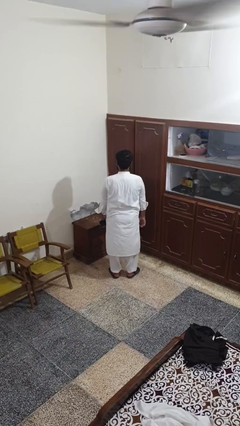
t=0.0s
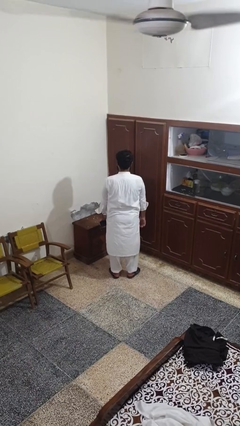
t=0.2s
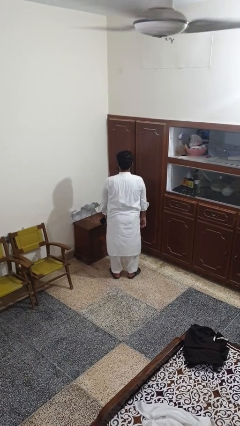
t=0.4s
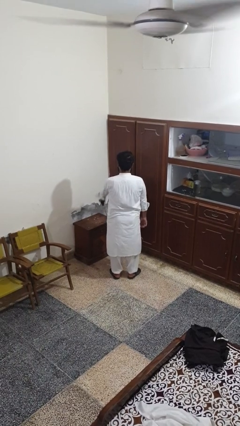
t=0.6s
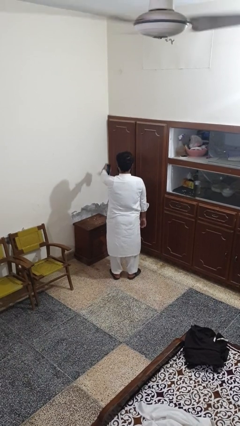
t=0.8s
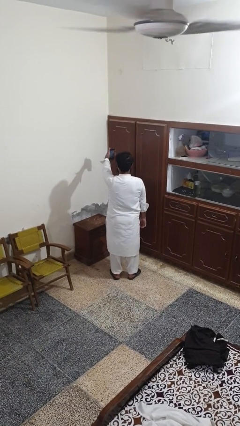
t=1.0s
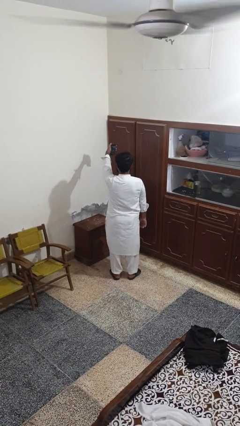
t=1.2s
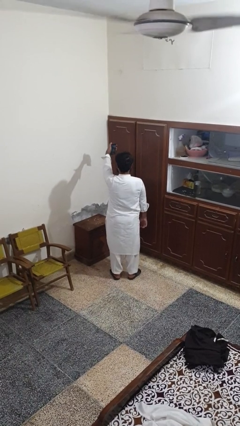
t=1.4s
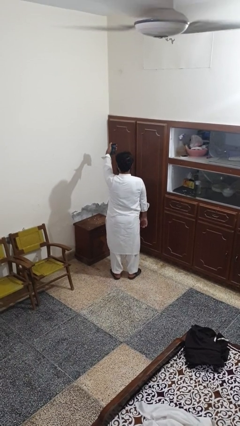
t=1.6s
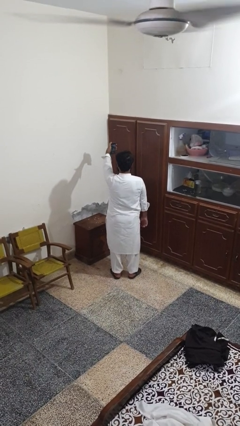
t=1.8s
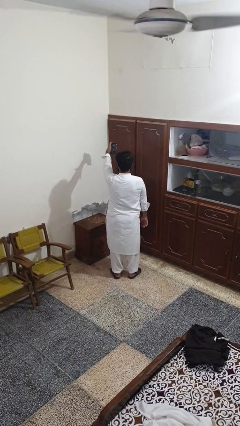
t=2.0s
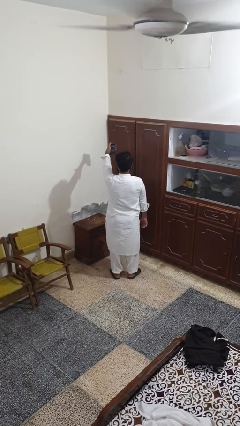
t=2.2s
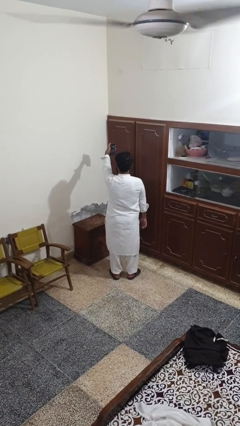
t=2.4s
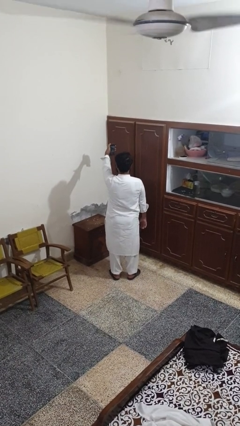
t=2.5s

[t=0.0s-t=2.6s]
person takes selfie

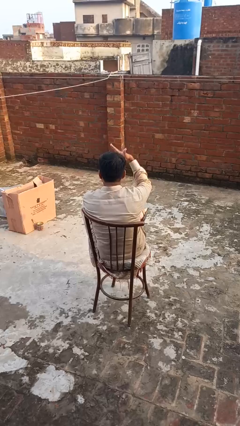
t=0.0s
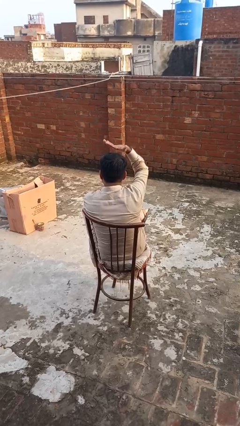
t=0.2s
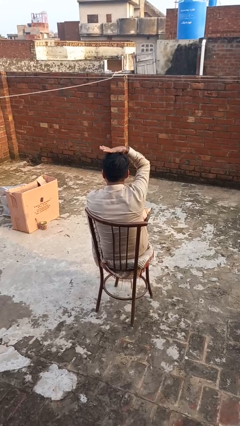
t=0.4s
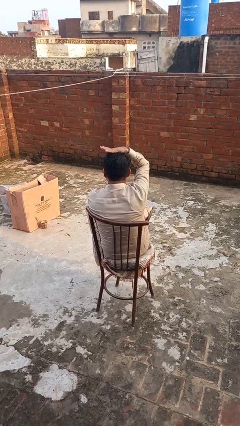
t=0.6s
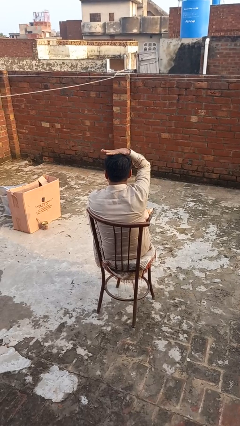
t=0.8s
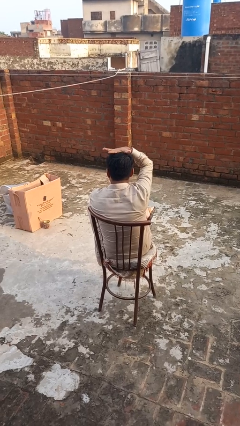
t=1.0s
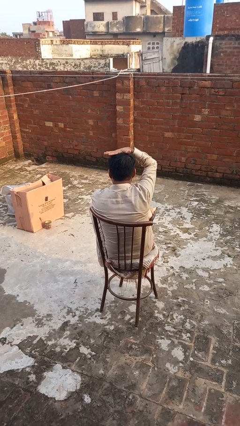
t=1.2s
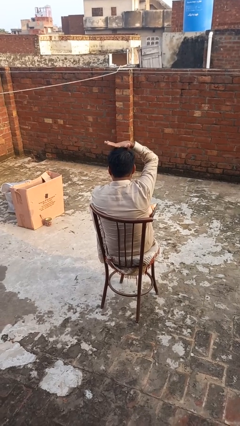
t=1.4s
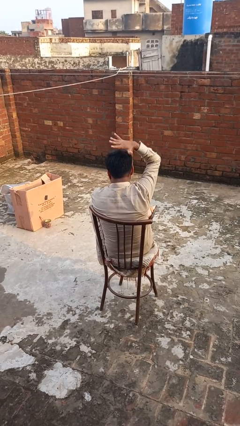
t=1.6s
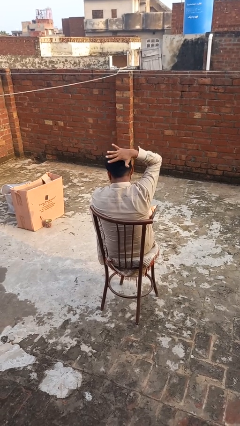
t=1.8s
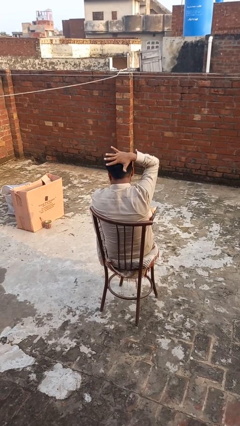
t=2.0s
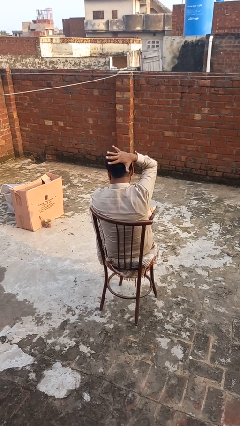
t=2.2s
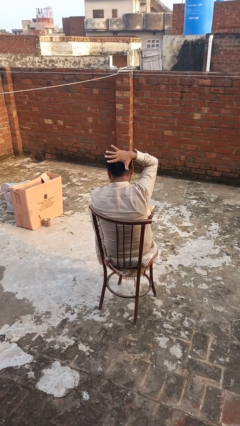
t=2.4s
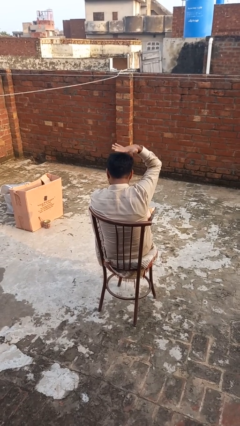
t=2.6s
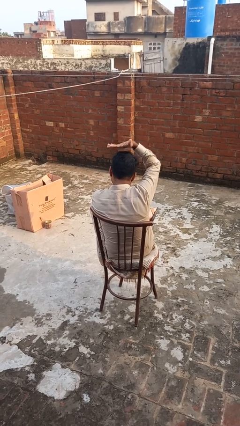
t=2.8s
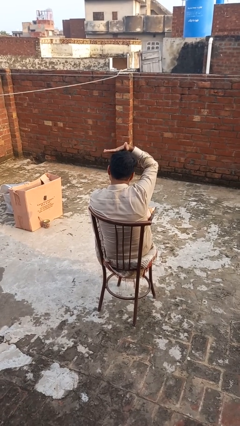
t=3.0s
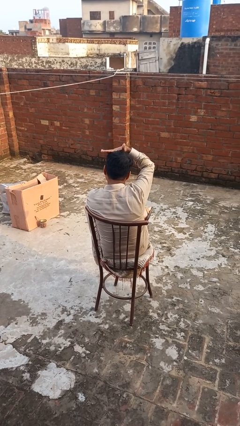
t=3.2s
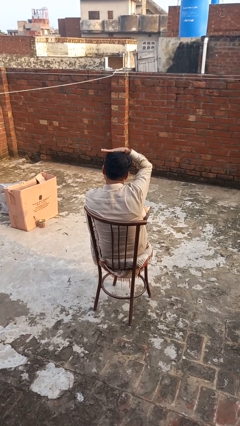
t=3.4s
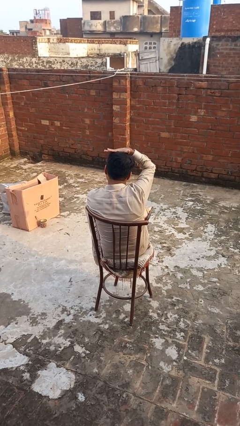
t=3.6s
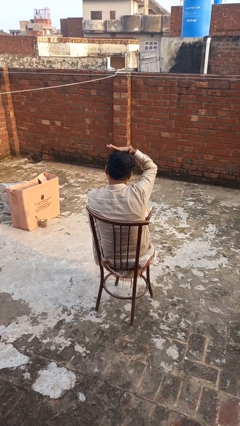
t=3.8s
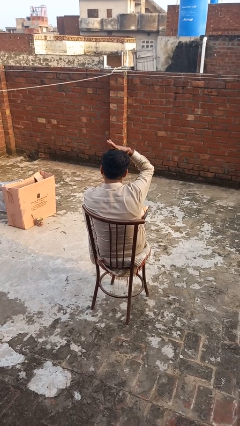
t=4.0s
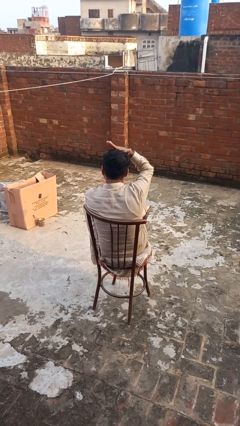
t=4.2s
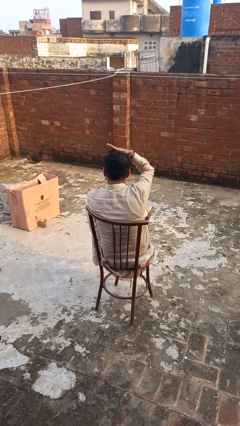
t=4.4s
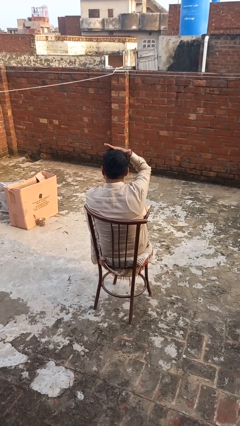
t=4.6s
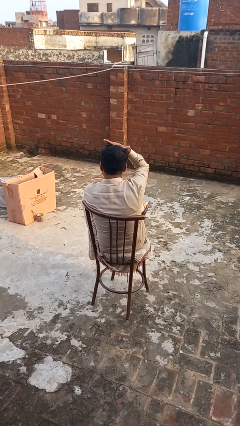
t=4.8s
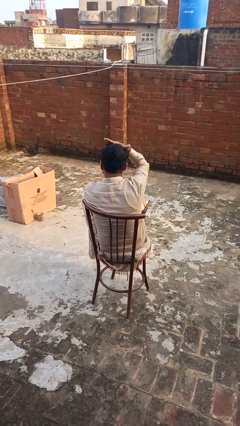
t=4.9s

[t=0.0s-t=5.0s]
person pats head

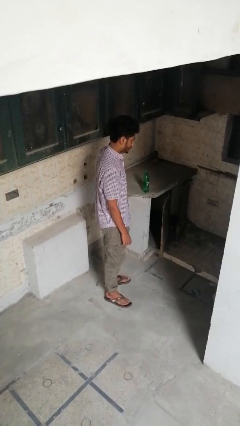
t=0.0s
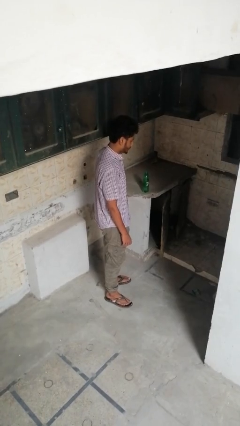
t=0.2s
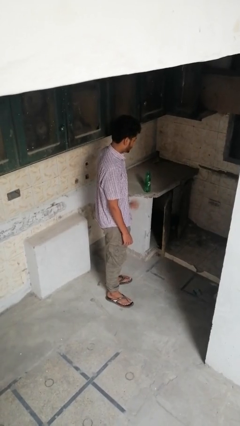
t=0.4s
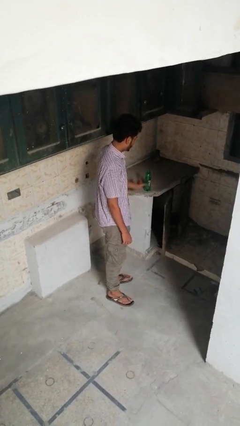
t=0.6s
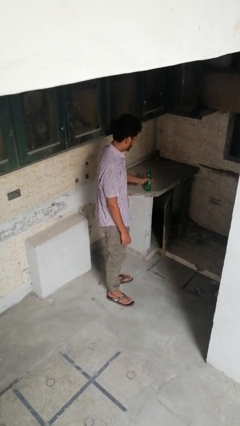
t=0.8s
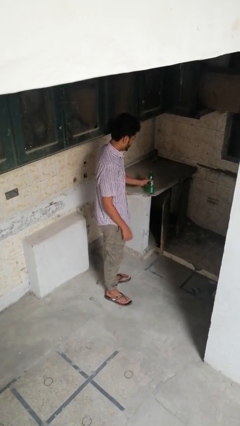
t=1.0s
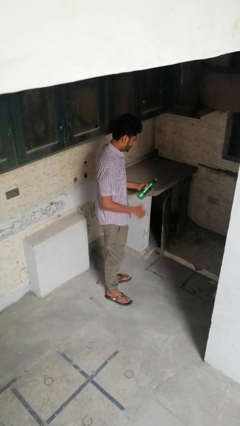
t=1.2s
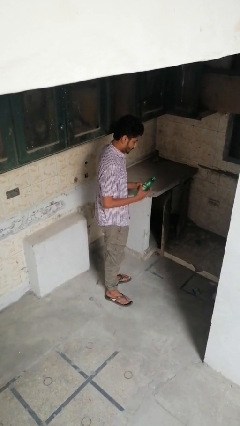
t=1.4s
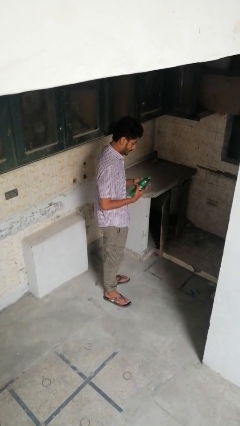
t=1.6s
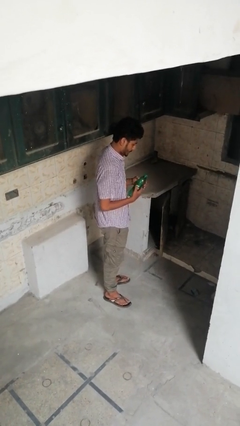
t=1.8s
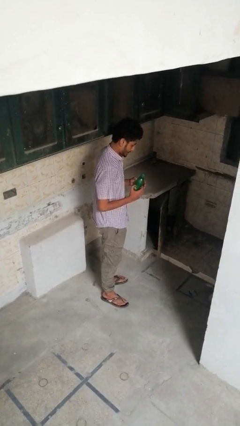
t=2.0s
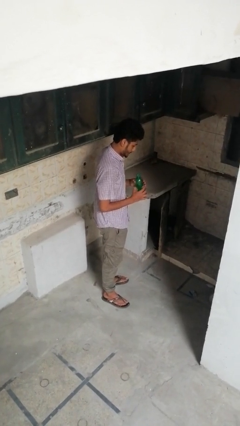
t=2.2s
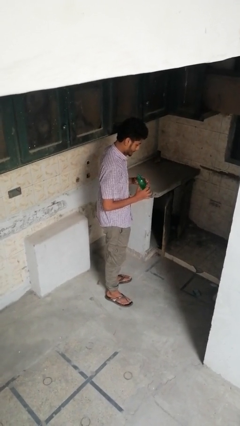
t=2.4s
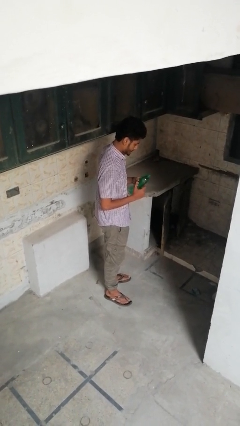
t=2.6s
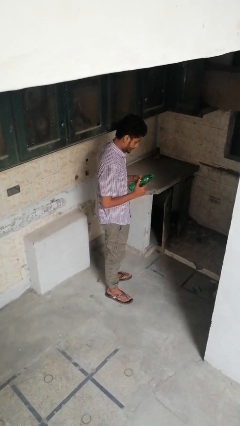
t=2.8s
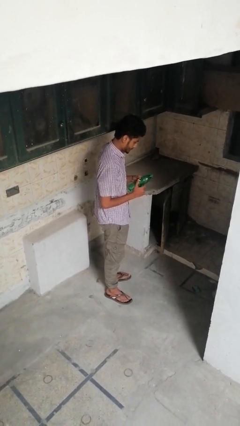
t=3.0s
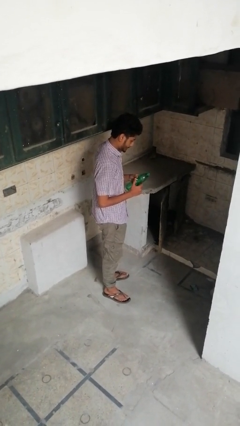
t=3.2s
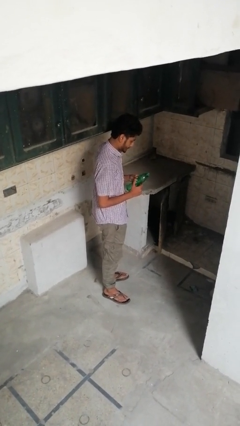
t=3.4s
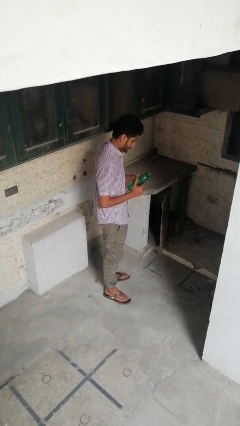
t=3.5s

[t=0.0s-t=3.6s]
person picks up object from countertop

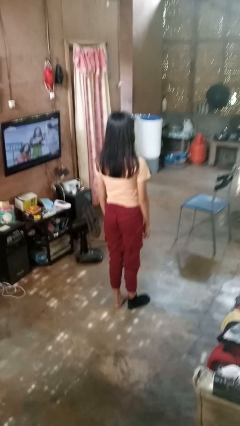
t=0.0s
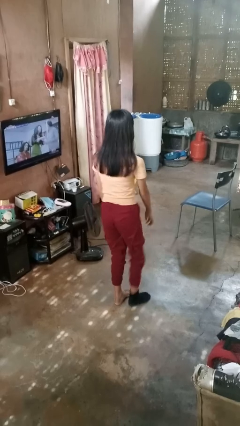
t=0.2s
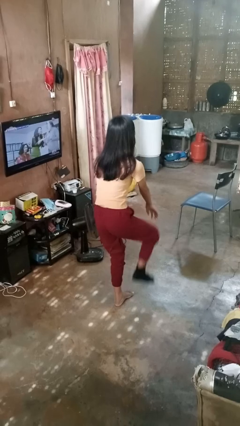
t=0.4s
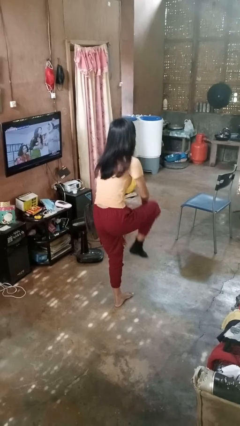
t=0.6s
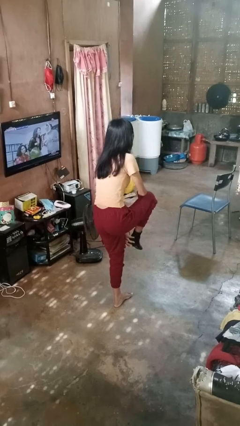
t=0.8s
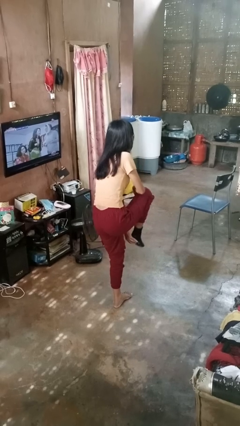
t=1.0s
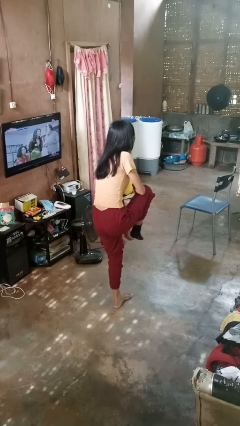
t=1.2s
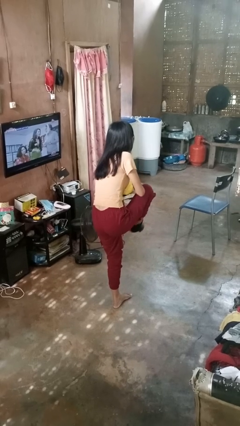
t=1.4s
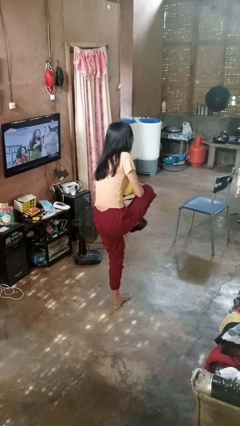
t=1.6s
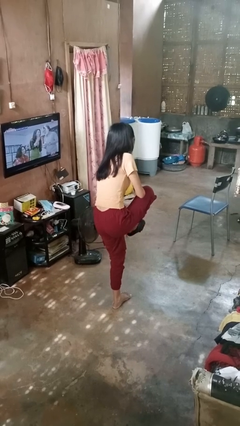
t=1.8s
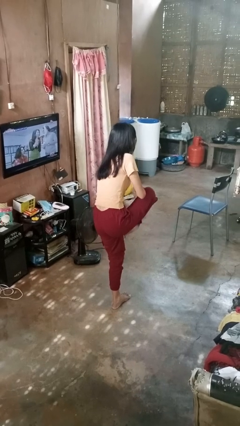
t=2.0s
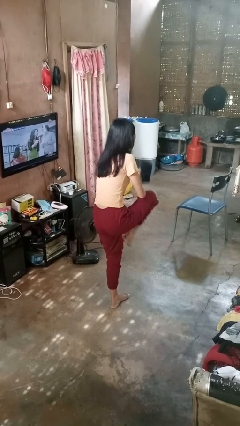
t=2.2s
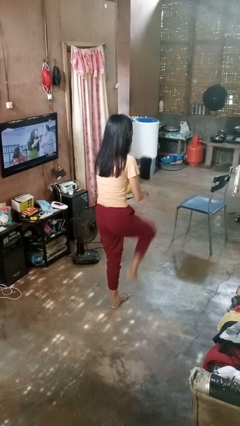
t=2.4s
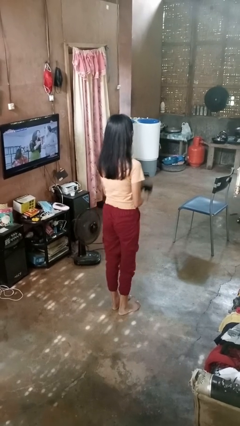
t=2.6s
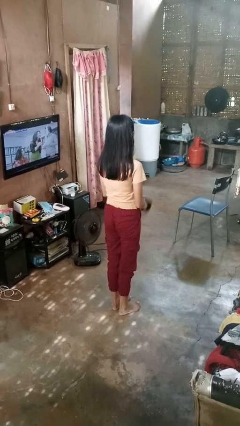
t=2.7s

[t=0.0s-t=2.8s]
person takes off socks

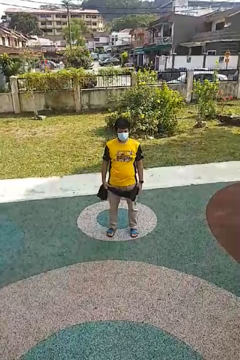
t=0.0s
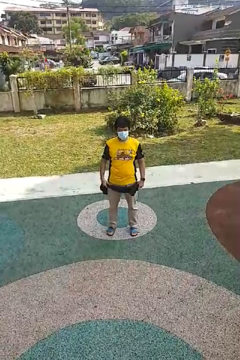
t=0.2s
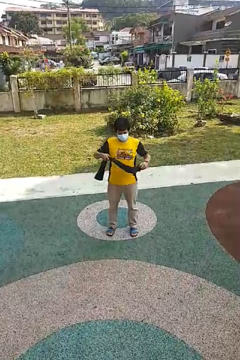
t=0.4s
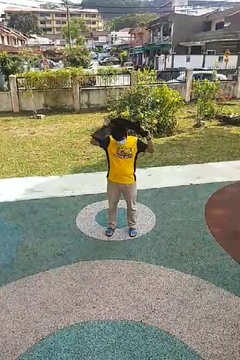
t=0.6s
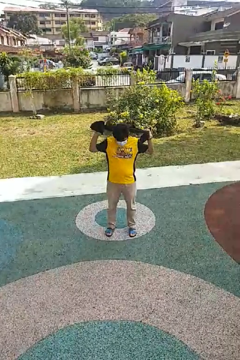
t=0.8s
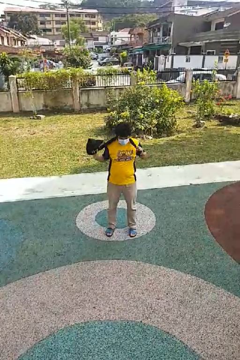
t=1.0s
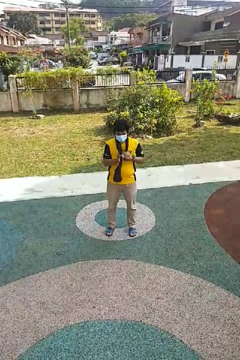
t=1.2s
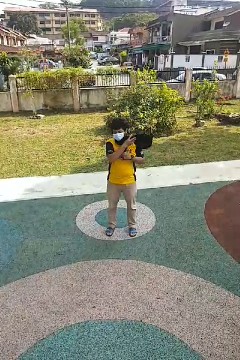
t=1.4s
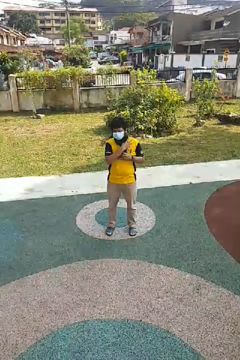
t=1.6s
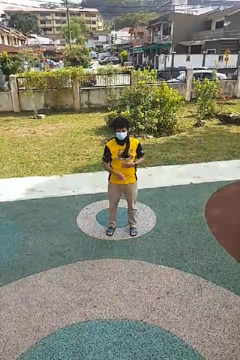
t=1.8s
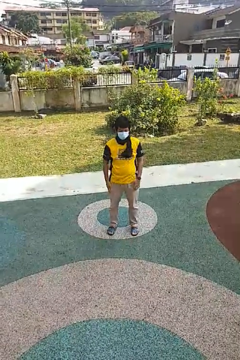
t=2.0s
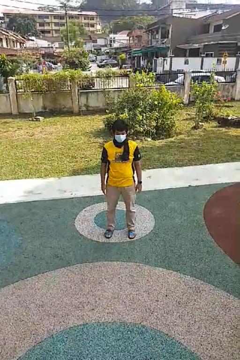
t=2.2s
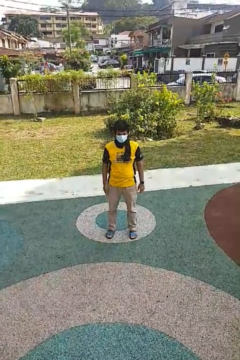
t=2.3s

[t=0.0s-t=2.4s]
person puts on scarf

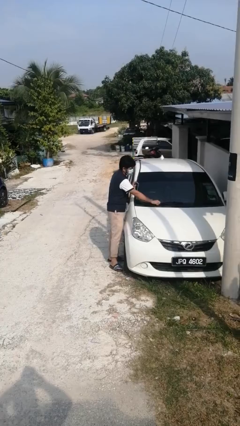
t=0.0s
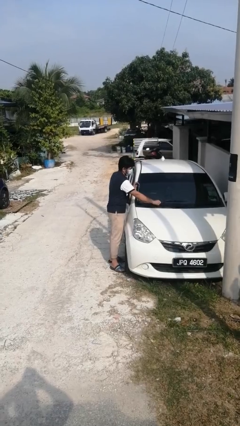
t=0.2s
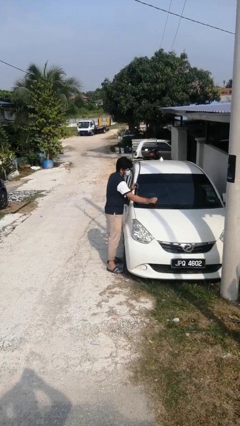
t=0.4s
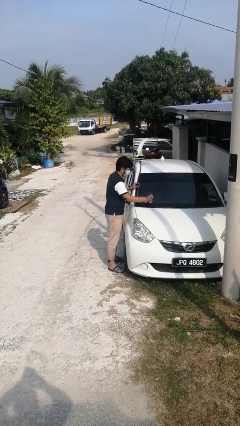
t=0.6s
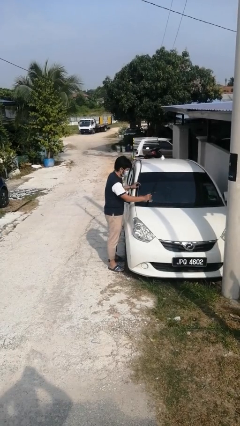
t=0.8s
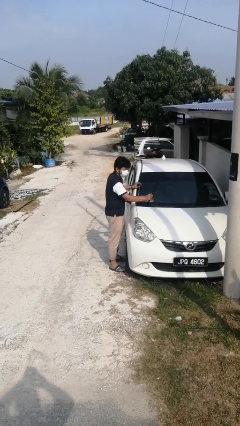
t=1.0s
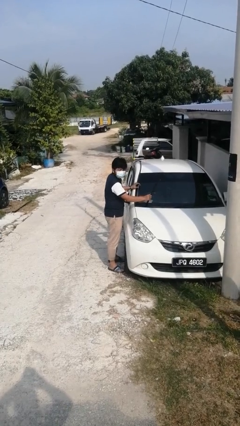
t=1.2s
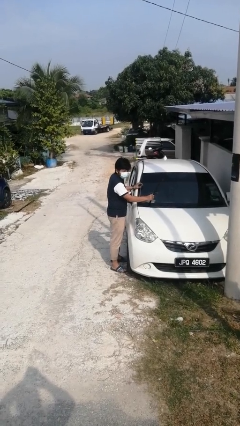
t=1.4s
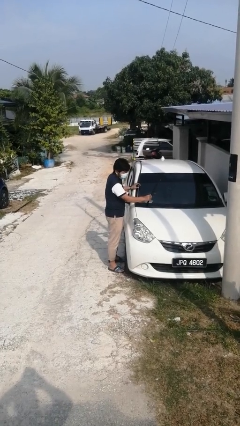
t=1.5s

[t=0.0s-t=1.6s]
person flips up car wipers
